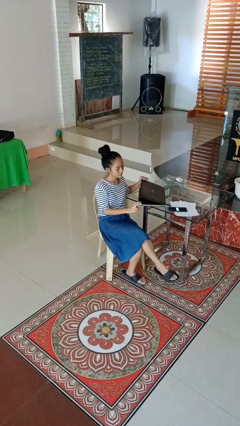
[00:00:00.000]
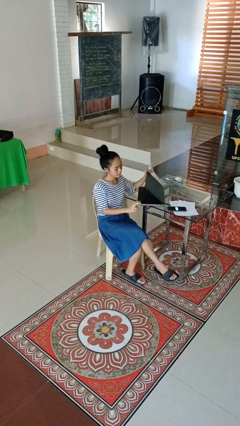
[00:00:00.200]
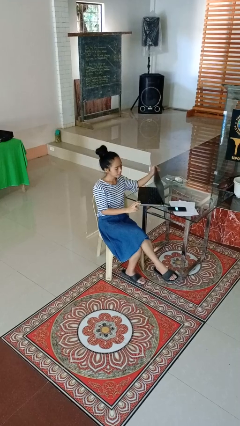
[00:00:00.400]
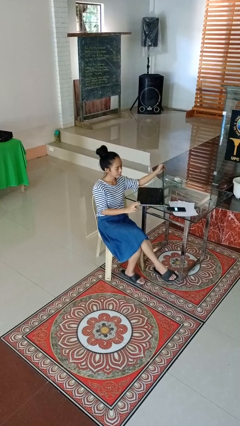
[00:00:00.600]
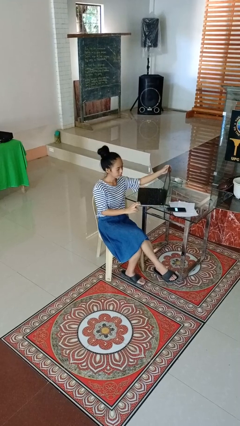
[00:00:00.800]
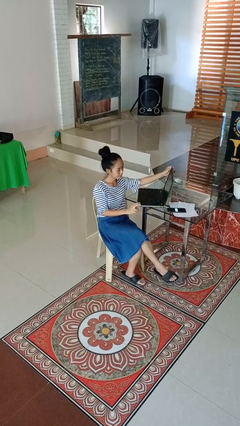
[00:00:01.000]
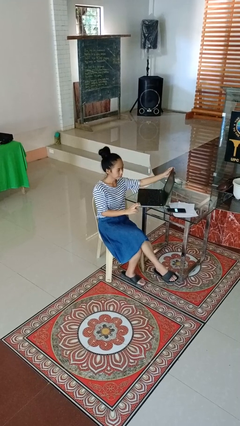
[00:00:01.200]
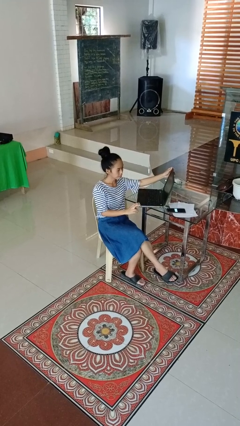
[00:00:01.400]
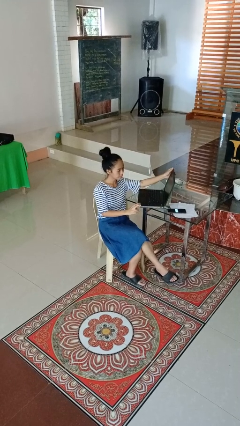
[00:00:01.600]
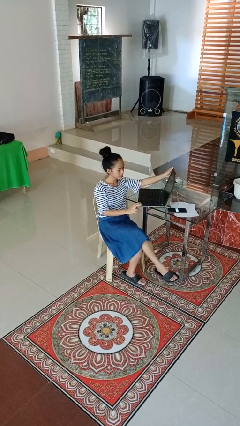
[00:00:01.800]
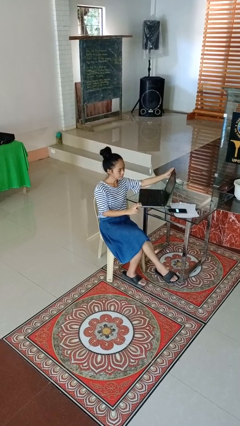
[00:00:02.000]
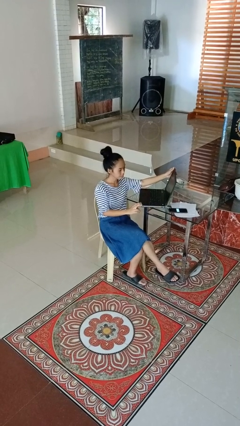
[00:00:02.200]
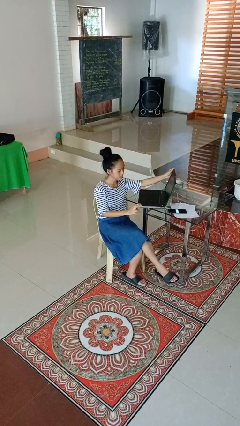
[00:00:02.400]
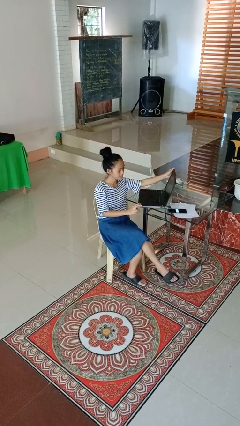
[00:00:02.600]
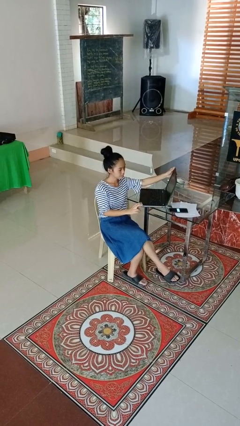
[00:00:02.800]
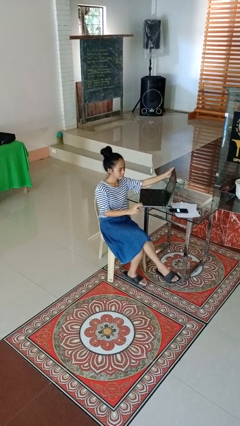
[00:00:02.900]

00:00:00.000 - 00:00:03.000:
person opens laptop

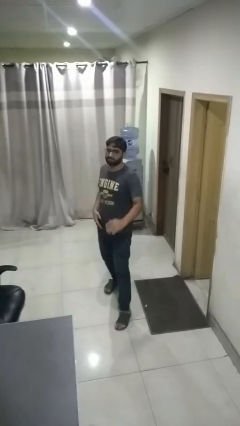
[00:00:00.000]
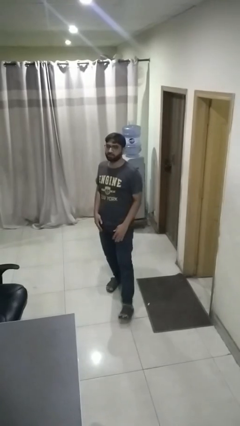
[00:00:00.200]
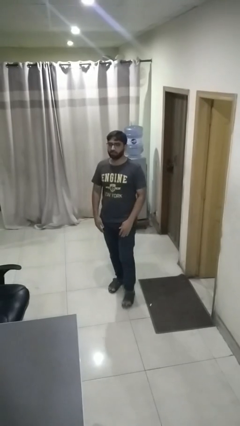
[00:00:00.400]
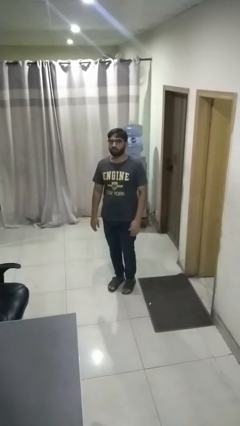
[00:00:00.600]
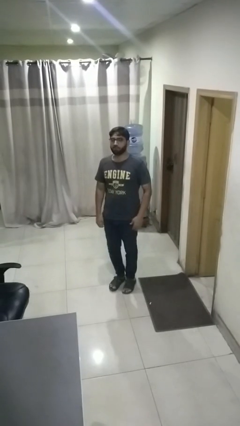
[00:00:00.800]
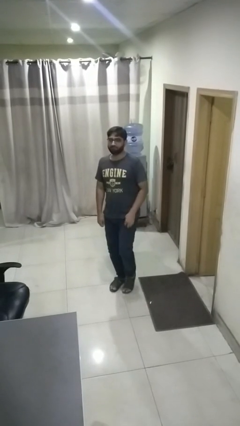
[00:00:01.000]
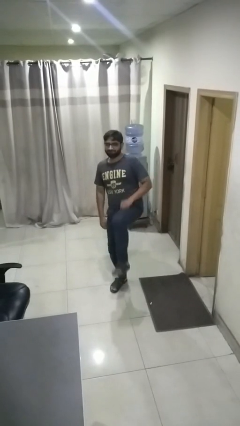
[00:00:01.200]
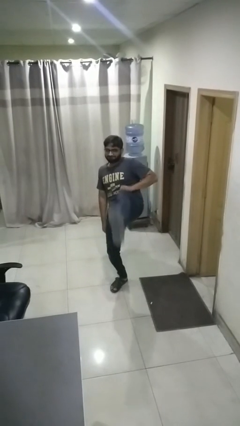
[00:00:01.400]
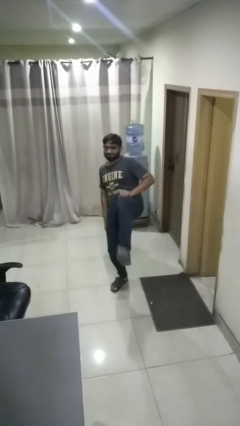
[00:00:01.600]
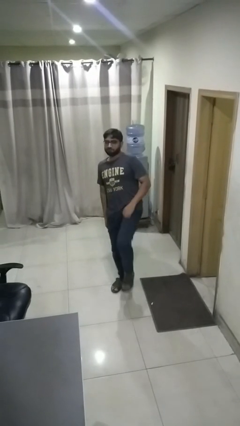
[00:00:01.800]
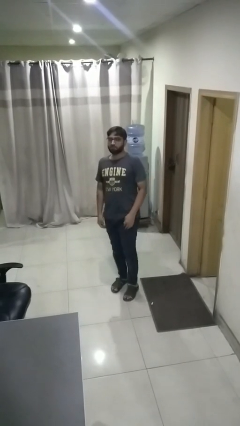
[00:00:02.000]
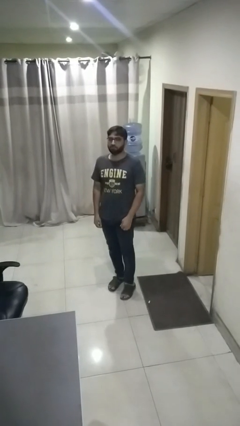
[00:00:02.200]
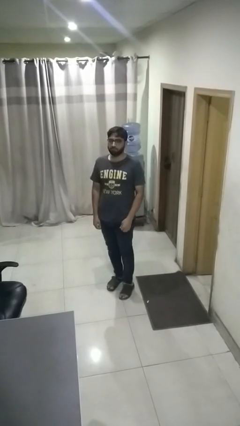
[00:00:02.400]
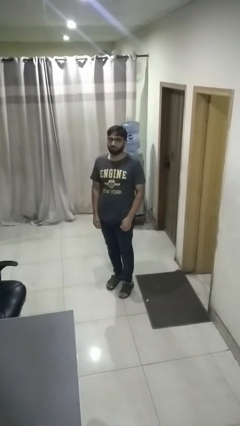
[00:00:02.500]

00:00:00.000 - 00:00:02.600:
person karate kicks

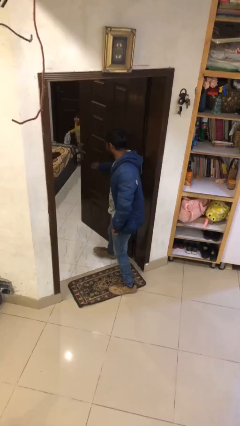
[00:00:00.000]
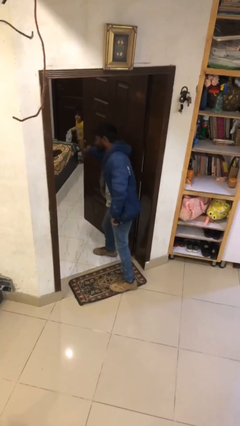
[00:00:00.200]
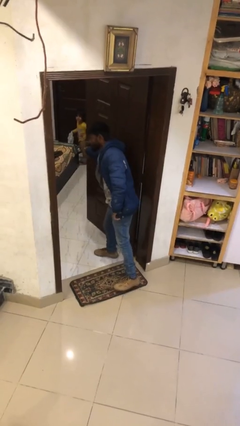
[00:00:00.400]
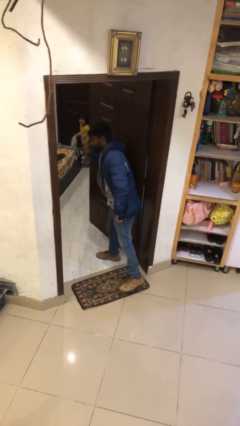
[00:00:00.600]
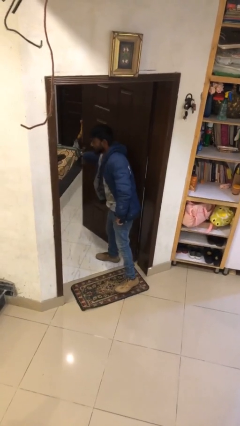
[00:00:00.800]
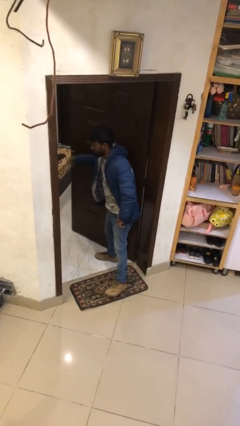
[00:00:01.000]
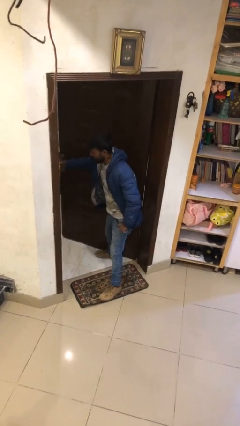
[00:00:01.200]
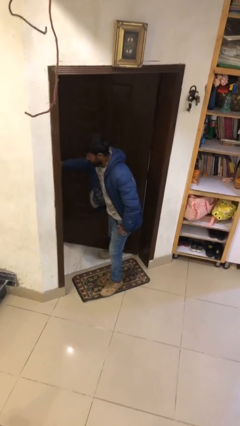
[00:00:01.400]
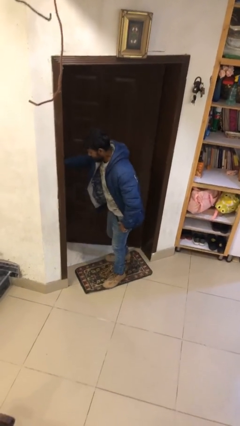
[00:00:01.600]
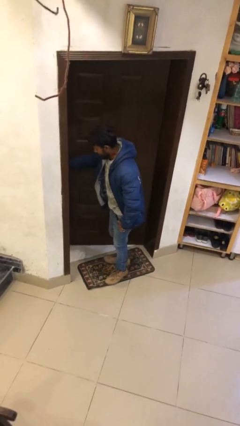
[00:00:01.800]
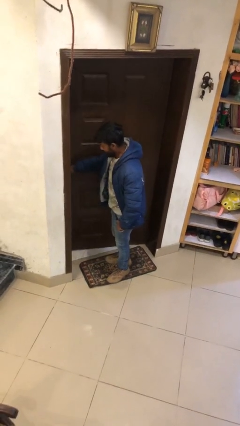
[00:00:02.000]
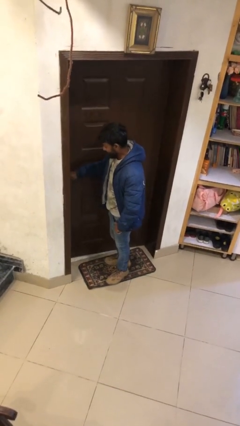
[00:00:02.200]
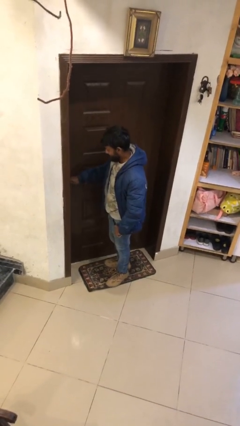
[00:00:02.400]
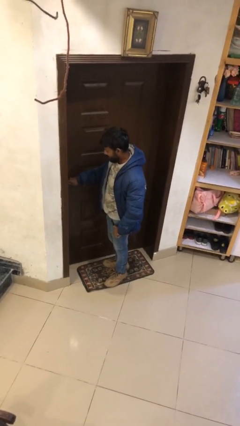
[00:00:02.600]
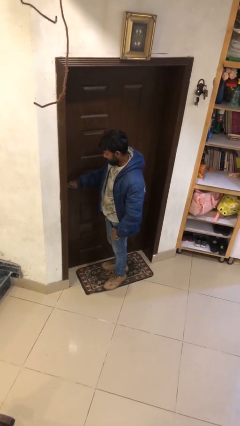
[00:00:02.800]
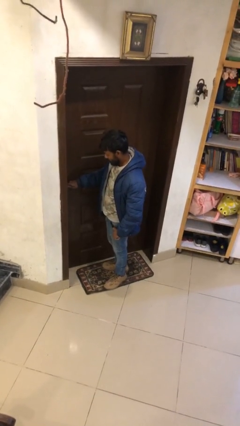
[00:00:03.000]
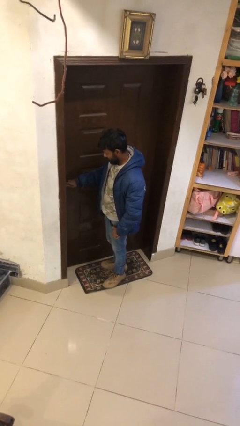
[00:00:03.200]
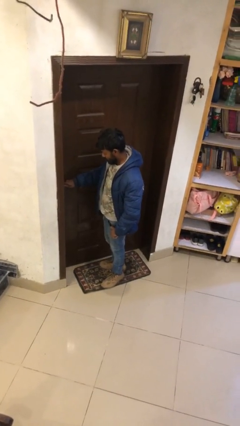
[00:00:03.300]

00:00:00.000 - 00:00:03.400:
person closes facility door

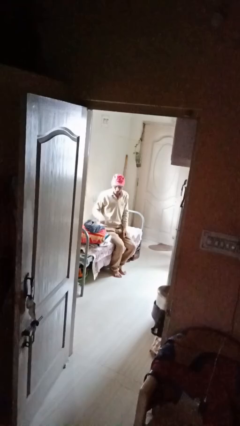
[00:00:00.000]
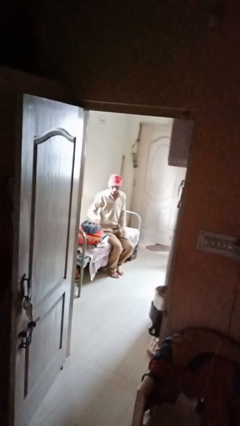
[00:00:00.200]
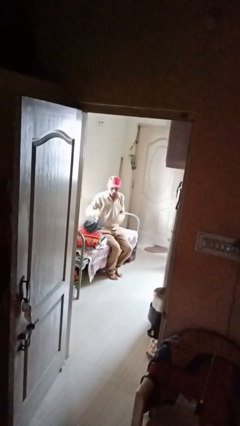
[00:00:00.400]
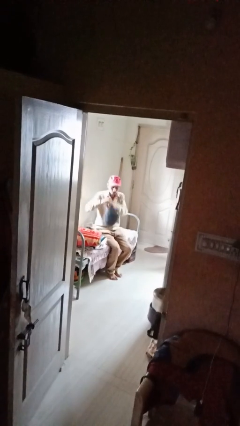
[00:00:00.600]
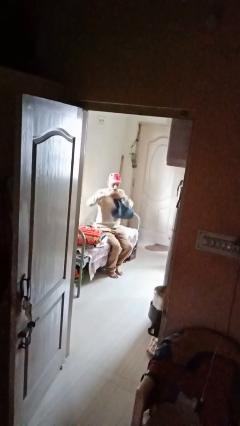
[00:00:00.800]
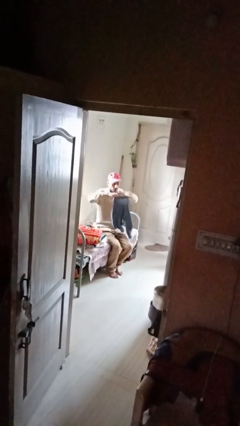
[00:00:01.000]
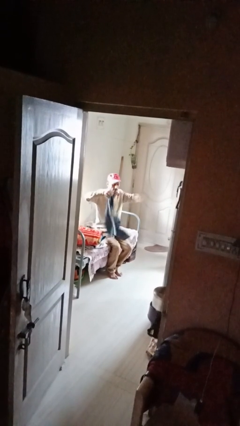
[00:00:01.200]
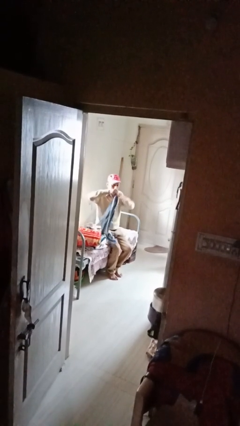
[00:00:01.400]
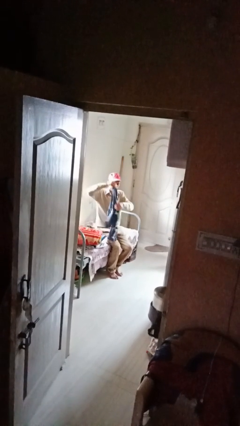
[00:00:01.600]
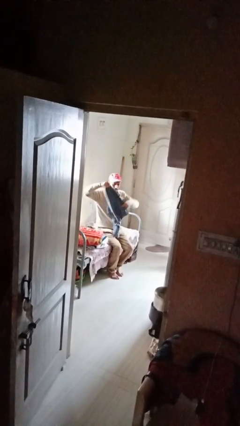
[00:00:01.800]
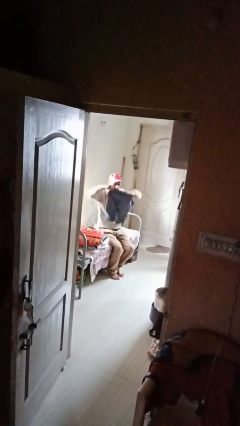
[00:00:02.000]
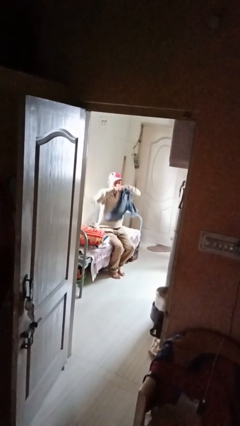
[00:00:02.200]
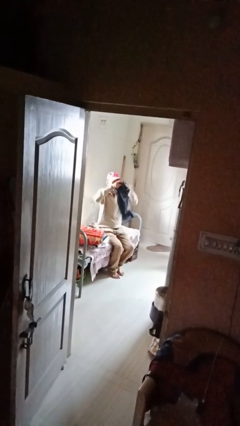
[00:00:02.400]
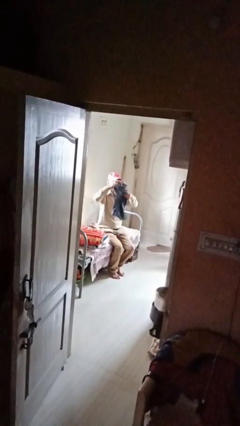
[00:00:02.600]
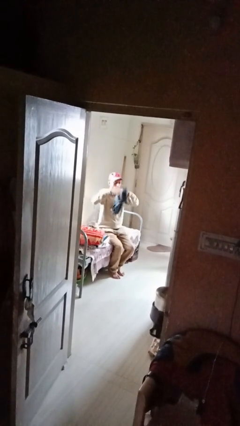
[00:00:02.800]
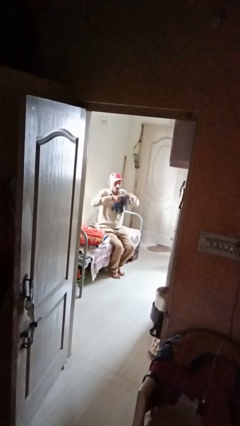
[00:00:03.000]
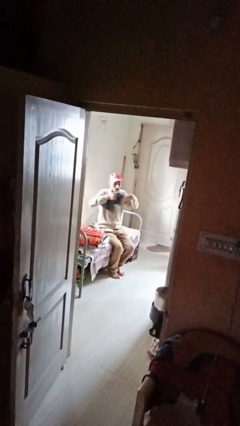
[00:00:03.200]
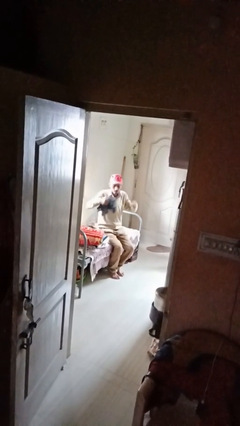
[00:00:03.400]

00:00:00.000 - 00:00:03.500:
person folds pants

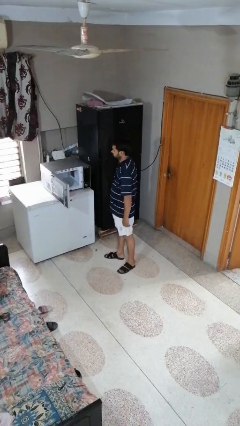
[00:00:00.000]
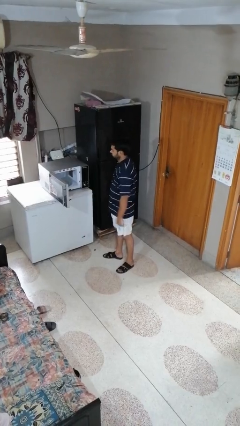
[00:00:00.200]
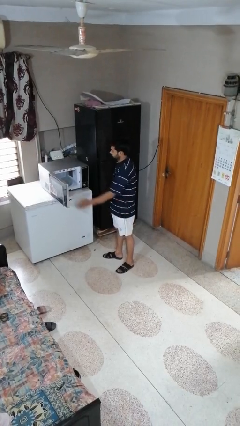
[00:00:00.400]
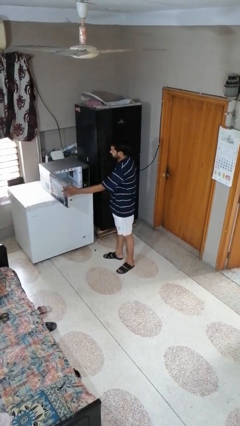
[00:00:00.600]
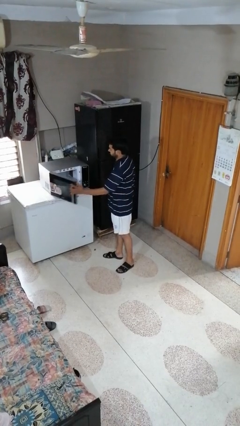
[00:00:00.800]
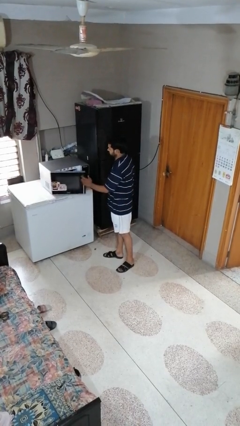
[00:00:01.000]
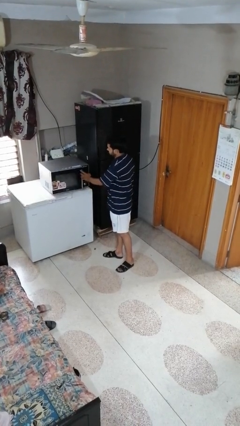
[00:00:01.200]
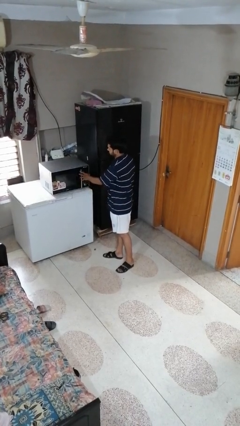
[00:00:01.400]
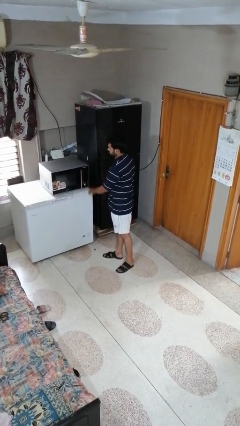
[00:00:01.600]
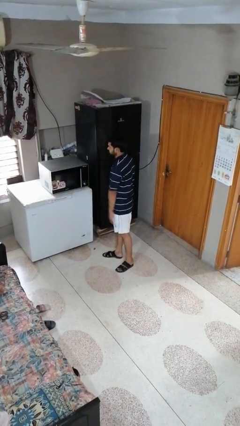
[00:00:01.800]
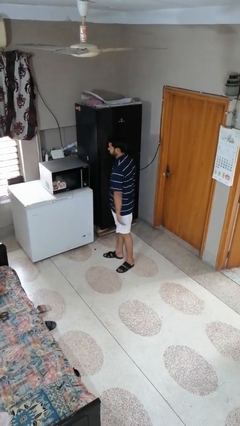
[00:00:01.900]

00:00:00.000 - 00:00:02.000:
person closes microwave

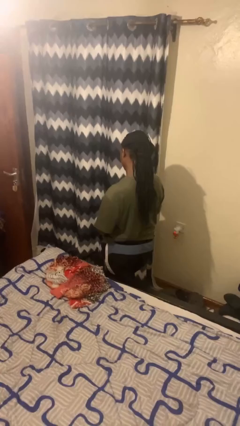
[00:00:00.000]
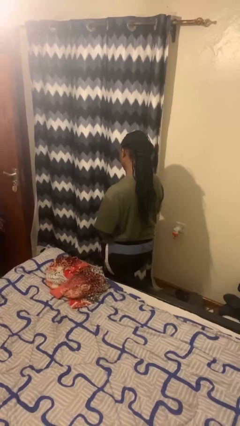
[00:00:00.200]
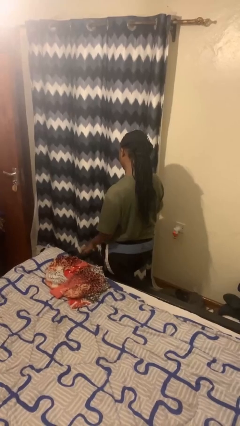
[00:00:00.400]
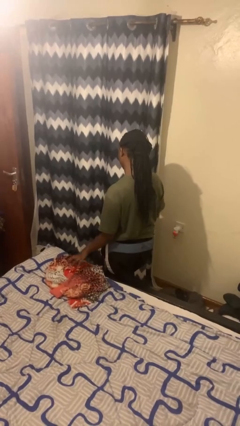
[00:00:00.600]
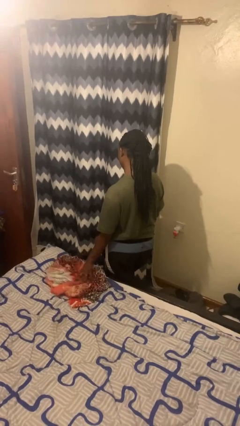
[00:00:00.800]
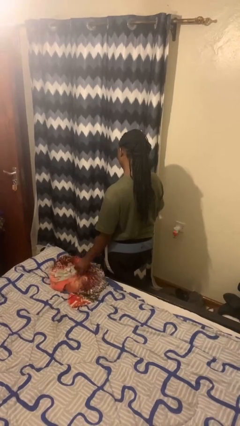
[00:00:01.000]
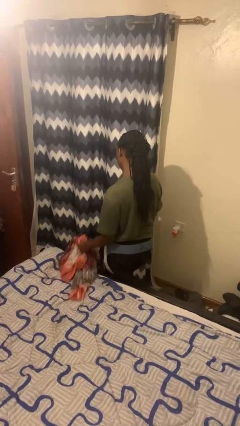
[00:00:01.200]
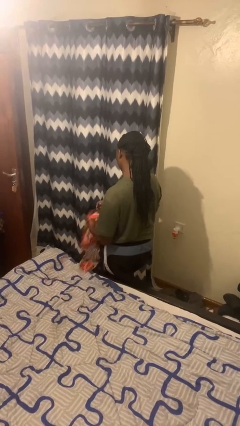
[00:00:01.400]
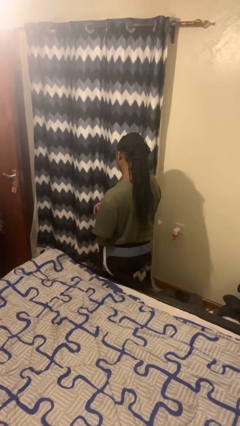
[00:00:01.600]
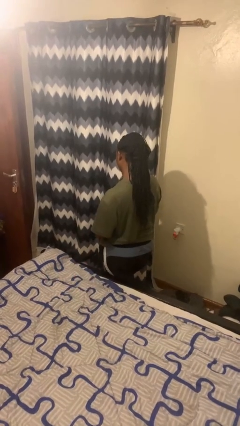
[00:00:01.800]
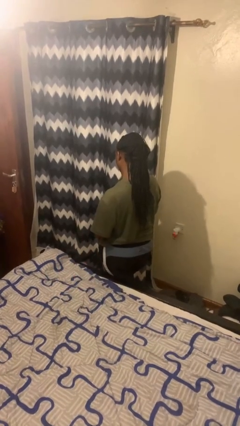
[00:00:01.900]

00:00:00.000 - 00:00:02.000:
person picks up object from bed

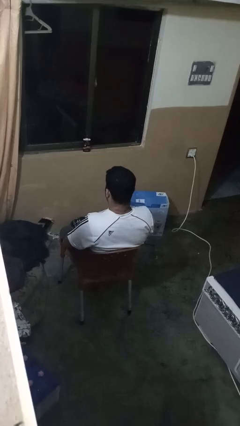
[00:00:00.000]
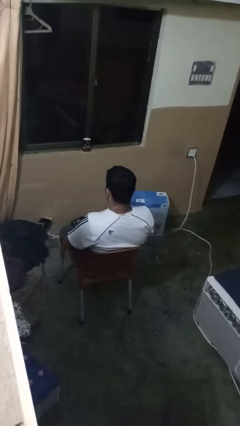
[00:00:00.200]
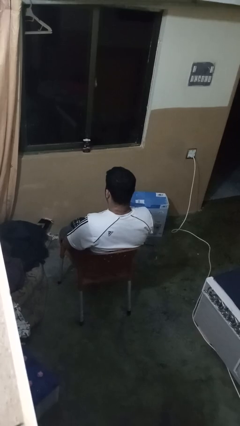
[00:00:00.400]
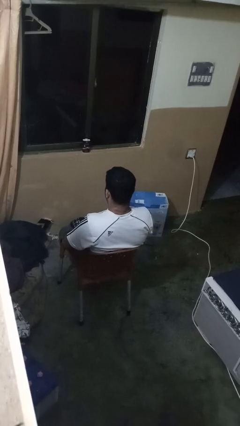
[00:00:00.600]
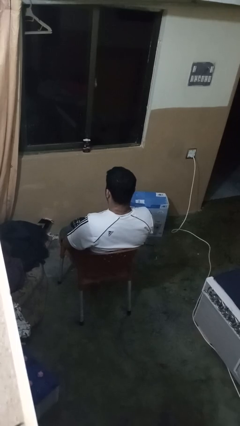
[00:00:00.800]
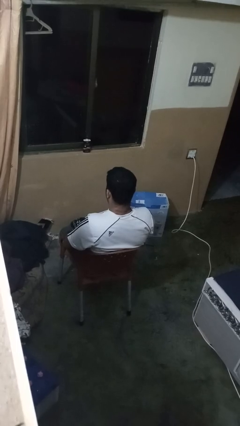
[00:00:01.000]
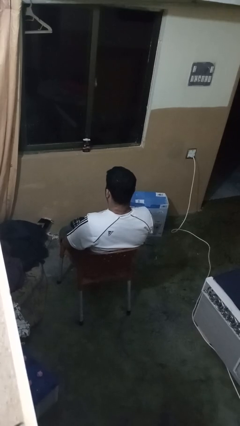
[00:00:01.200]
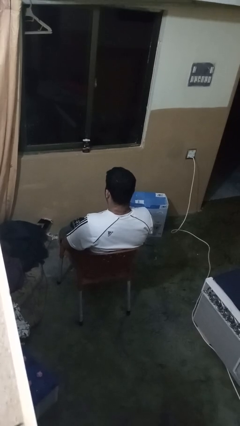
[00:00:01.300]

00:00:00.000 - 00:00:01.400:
person snaps fingers
